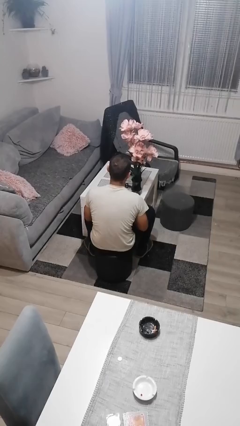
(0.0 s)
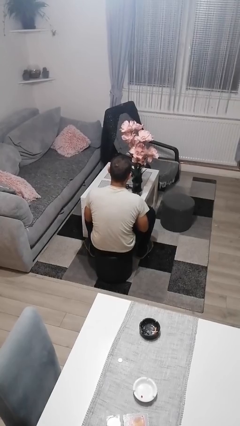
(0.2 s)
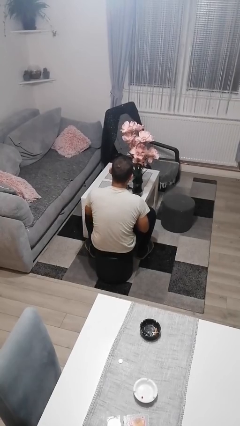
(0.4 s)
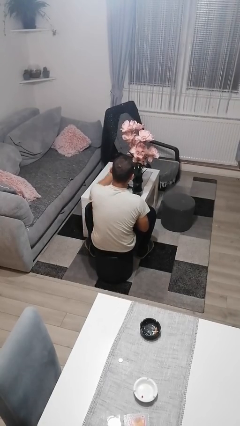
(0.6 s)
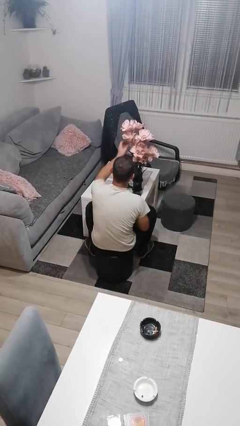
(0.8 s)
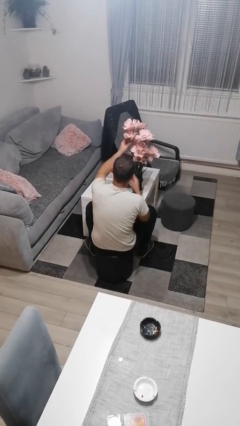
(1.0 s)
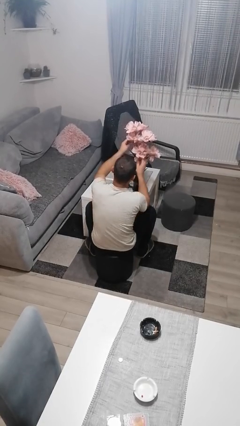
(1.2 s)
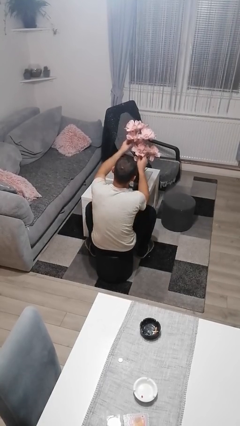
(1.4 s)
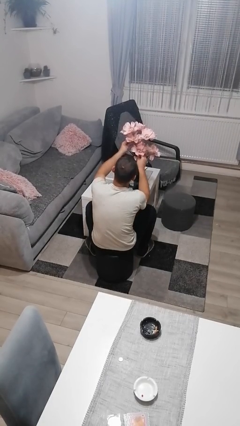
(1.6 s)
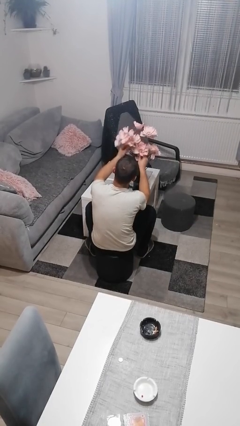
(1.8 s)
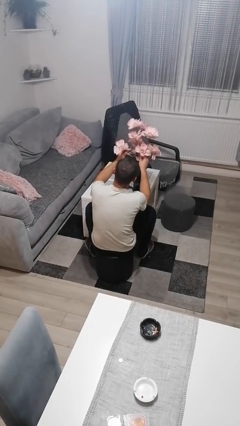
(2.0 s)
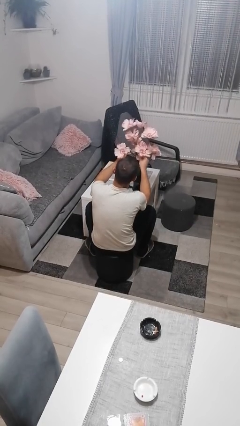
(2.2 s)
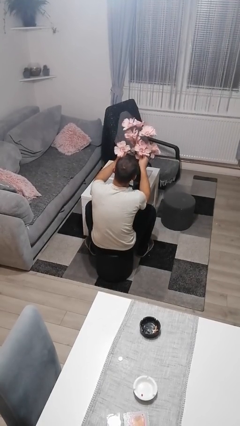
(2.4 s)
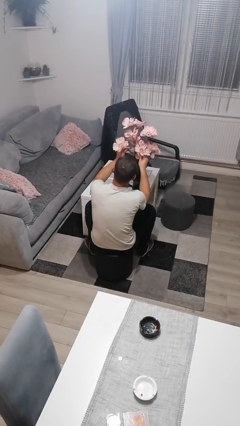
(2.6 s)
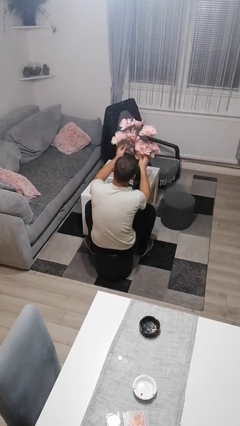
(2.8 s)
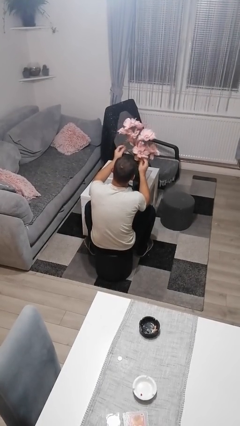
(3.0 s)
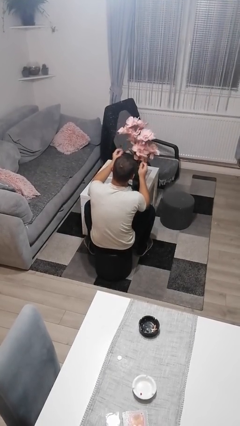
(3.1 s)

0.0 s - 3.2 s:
person arranges flowers in vase

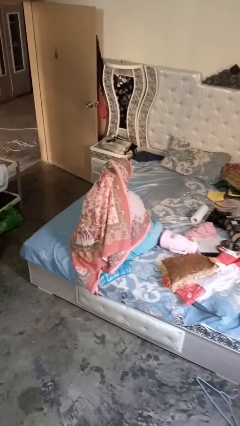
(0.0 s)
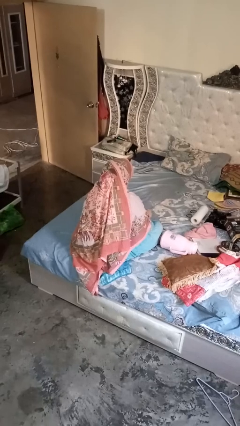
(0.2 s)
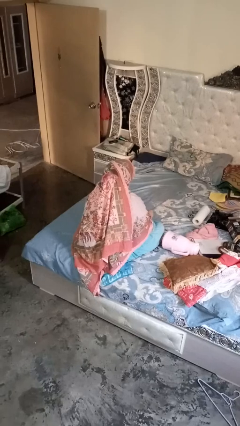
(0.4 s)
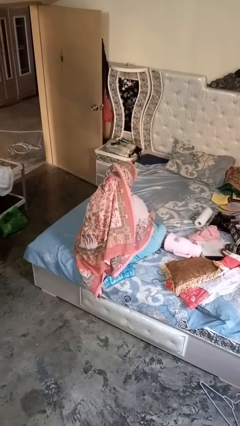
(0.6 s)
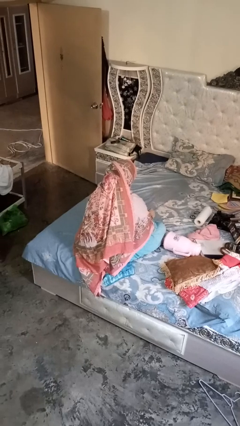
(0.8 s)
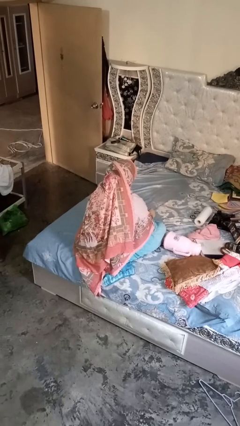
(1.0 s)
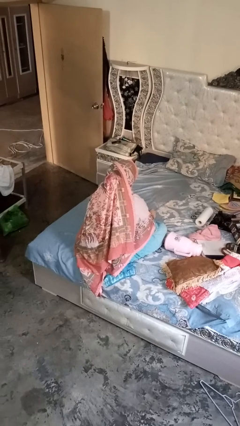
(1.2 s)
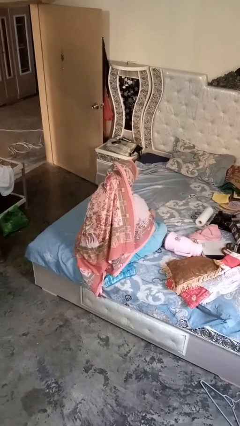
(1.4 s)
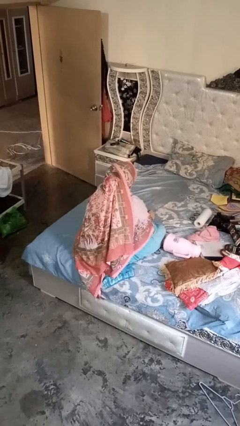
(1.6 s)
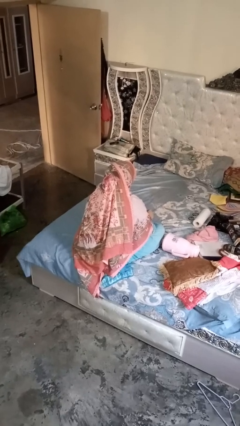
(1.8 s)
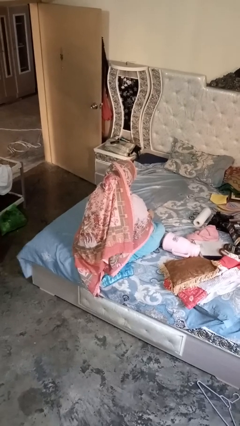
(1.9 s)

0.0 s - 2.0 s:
person stirs mug

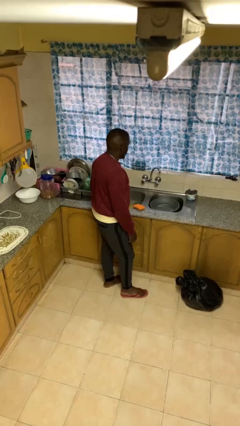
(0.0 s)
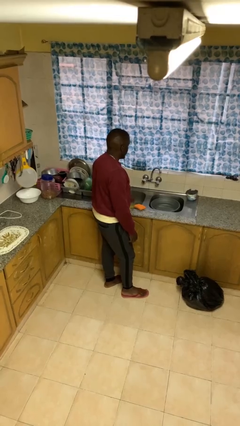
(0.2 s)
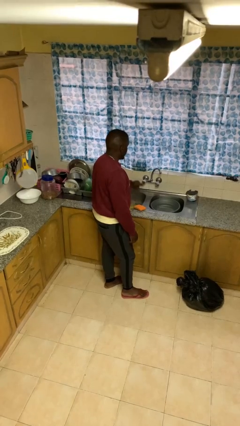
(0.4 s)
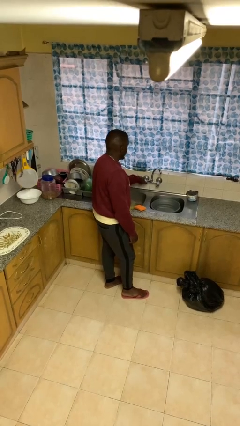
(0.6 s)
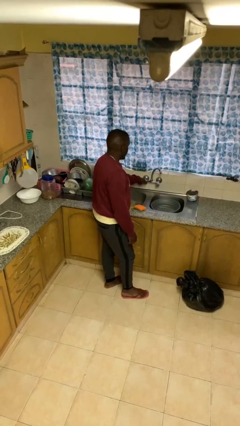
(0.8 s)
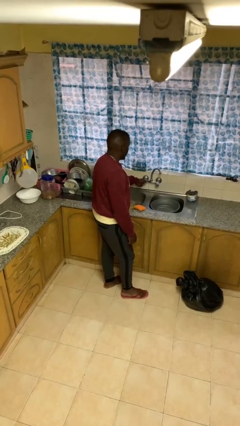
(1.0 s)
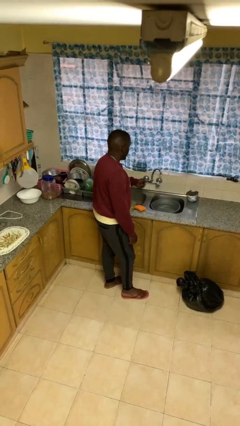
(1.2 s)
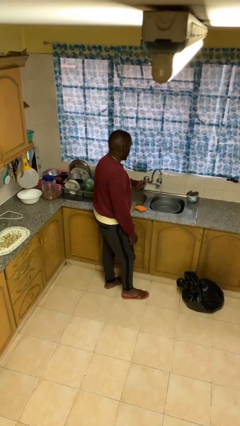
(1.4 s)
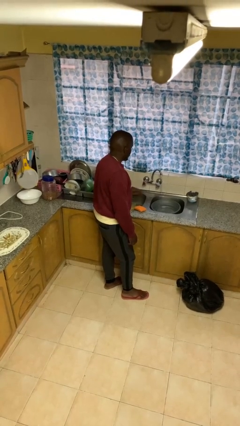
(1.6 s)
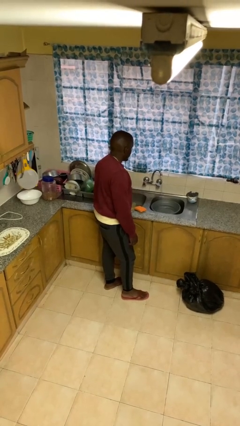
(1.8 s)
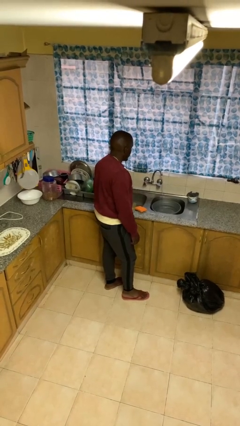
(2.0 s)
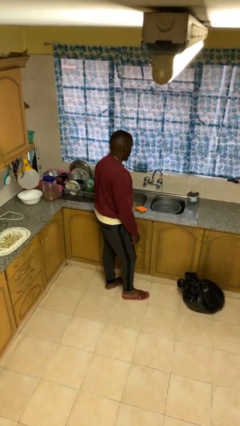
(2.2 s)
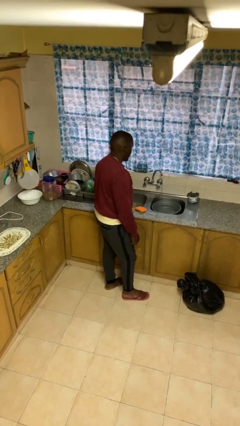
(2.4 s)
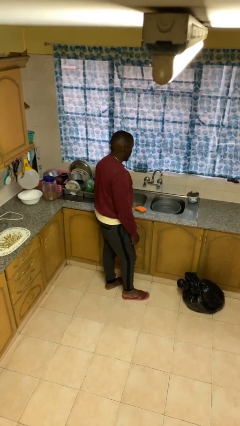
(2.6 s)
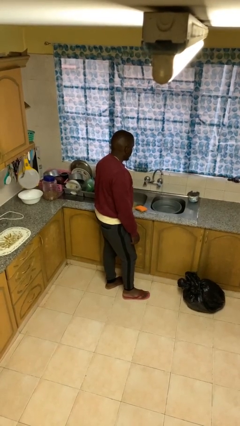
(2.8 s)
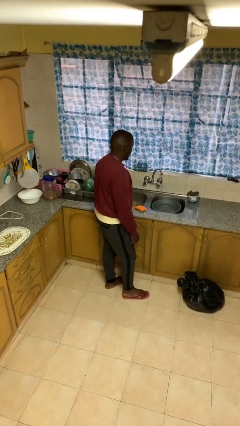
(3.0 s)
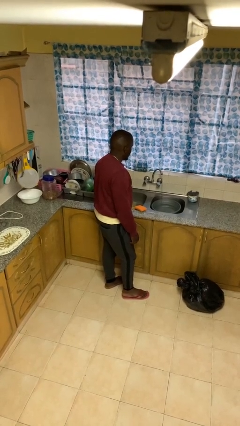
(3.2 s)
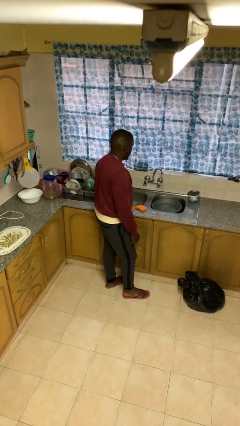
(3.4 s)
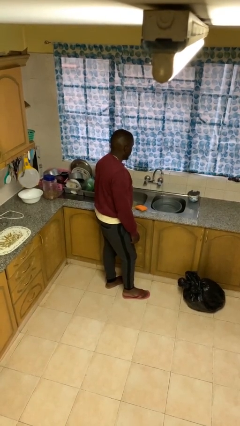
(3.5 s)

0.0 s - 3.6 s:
person turns on faucet

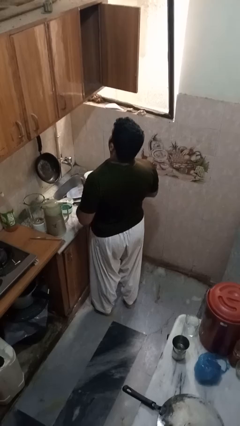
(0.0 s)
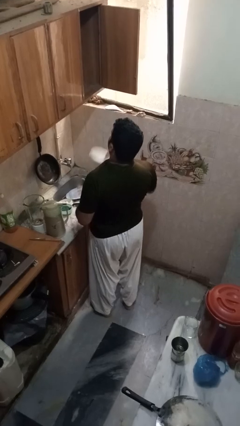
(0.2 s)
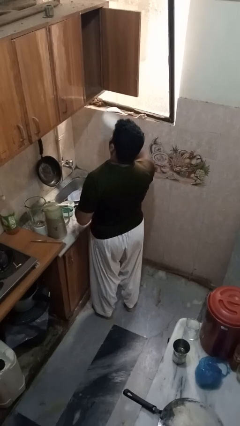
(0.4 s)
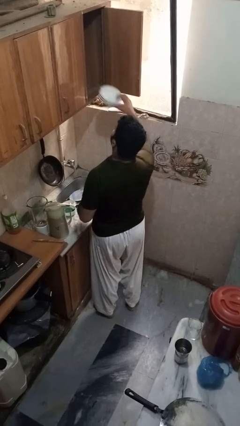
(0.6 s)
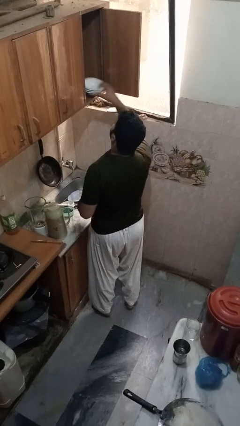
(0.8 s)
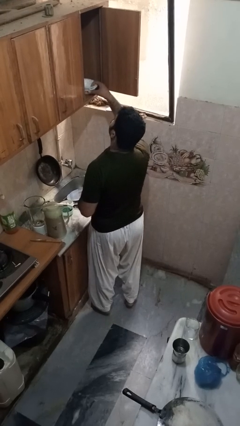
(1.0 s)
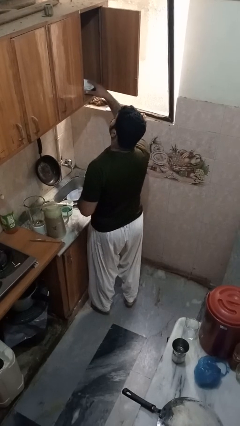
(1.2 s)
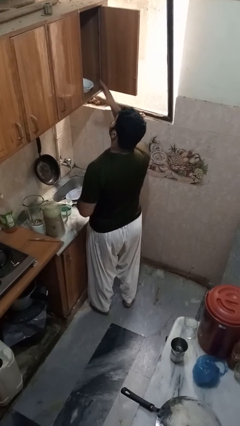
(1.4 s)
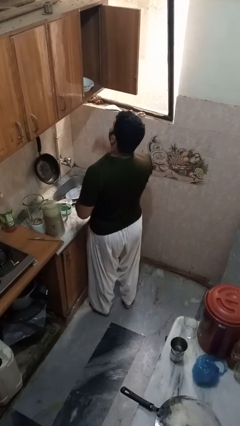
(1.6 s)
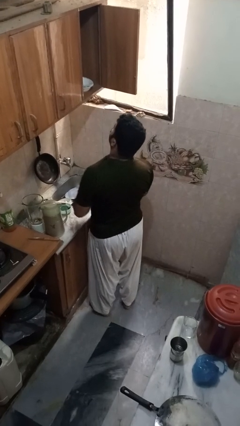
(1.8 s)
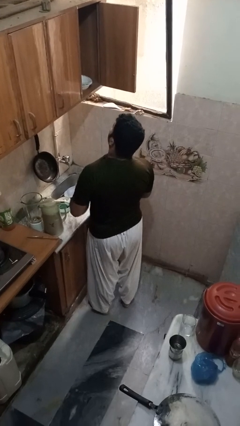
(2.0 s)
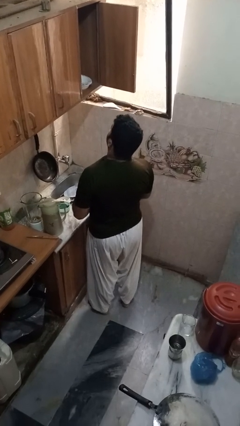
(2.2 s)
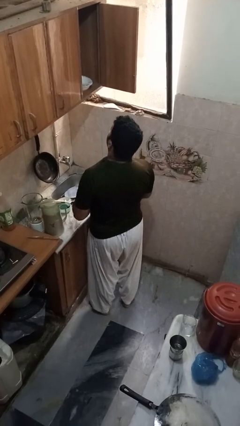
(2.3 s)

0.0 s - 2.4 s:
person puts object in cabinet

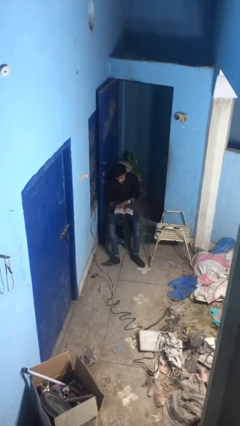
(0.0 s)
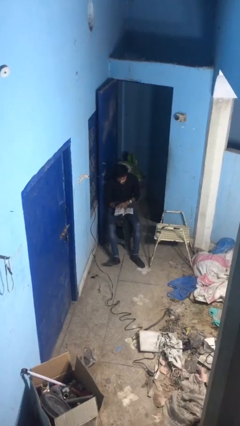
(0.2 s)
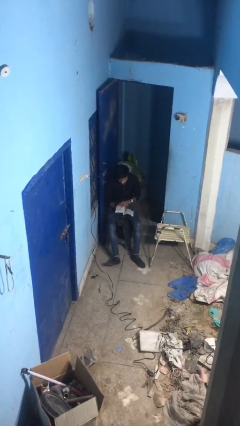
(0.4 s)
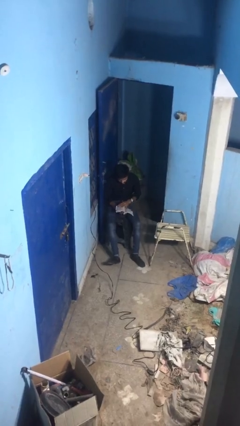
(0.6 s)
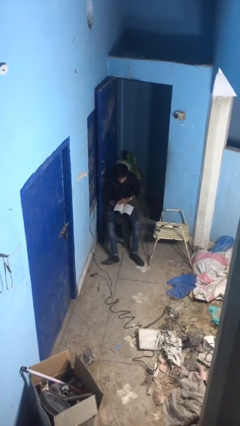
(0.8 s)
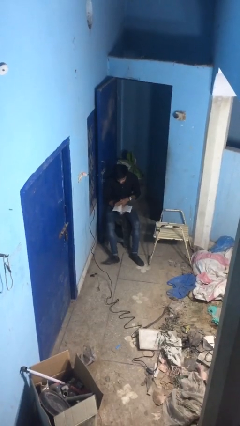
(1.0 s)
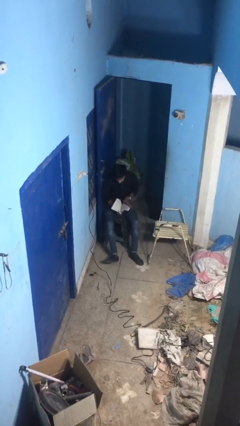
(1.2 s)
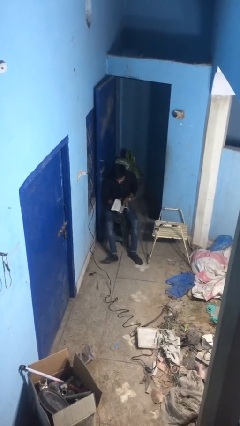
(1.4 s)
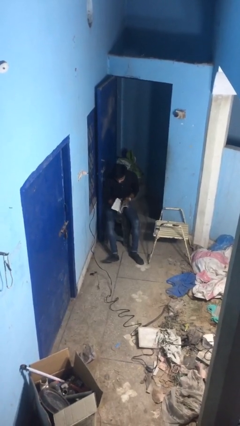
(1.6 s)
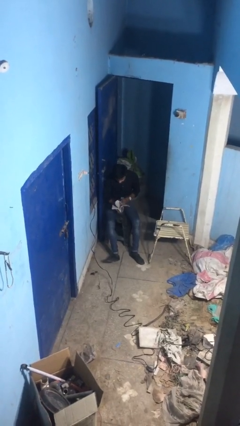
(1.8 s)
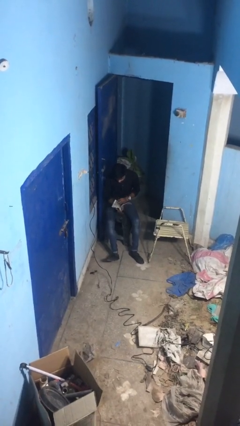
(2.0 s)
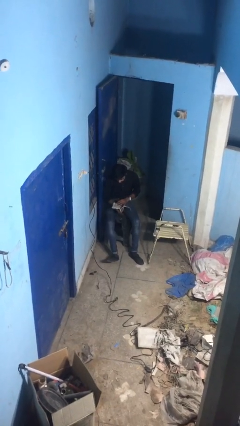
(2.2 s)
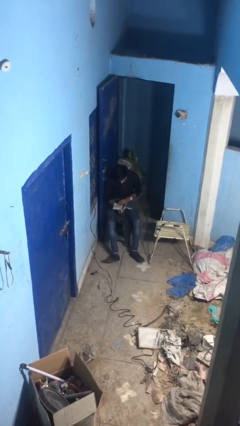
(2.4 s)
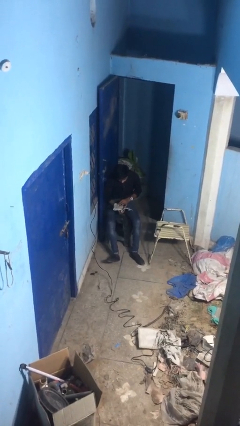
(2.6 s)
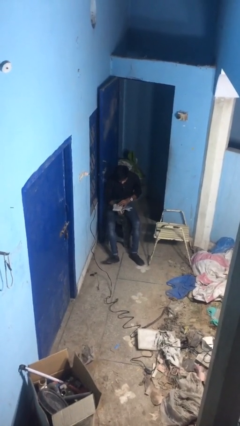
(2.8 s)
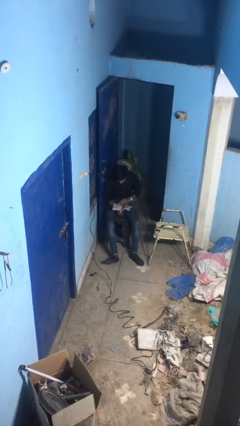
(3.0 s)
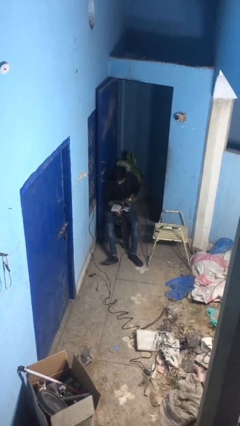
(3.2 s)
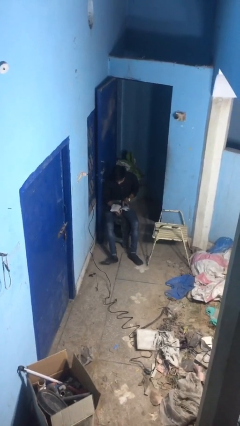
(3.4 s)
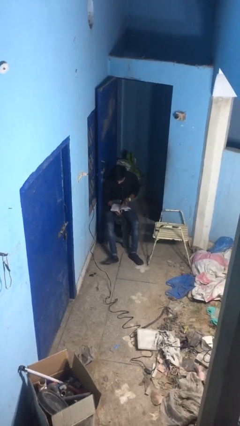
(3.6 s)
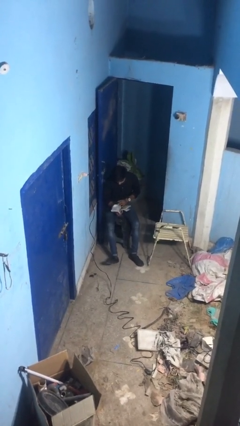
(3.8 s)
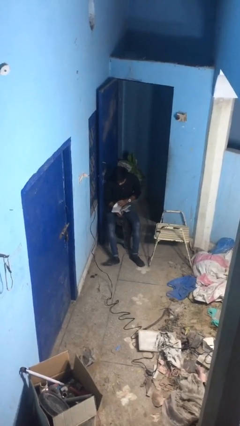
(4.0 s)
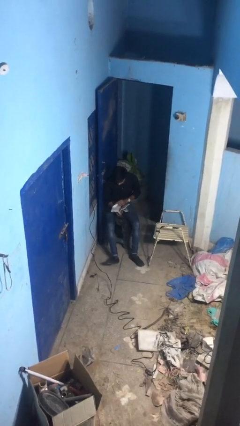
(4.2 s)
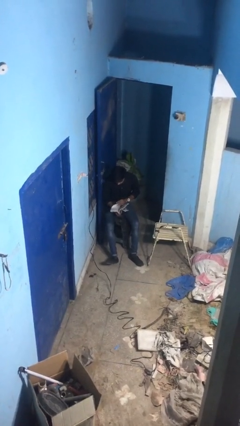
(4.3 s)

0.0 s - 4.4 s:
person reads document

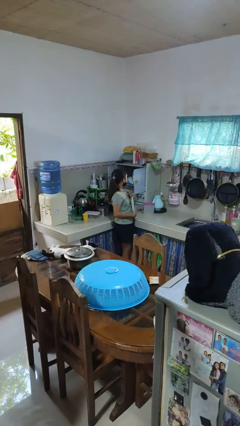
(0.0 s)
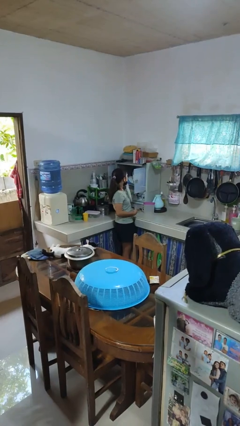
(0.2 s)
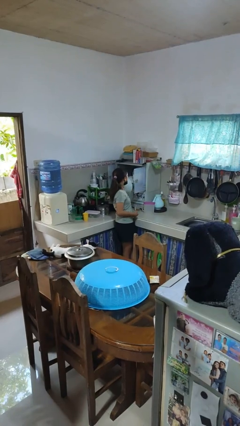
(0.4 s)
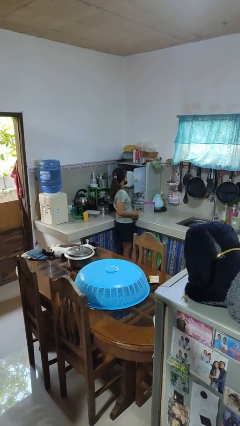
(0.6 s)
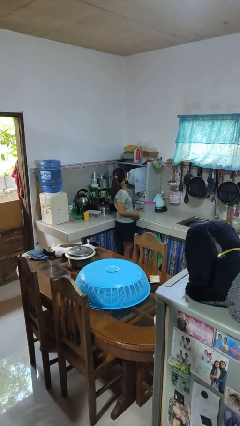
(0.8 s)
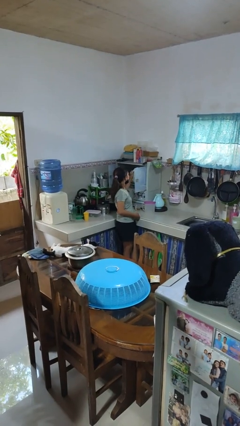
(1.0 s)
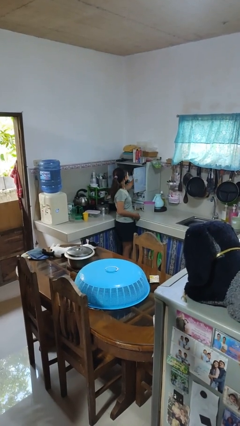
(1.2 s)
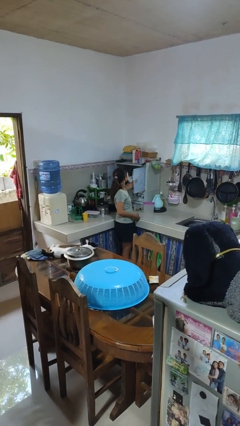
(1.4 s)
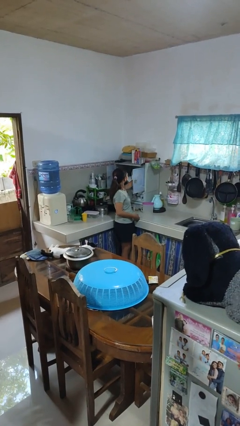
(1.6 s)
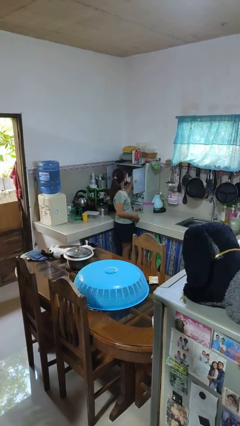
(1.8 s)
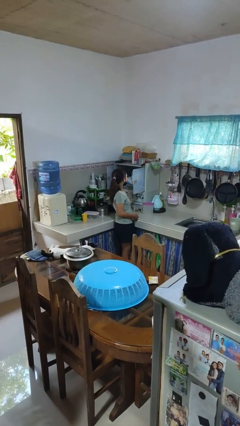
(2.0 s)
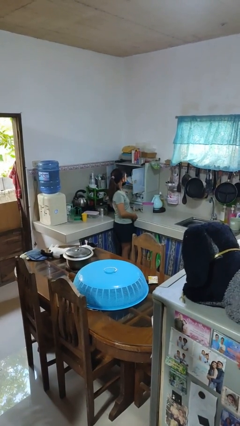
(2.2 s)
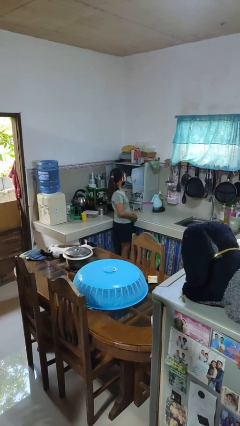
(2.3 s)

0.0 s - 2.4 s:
person puts object into kitchen drawer
